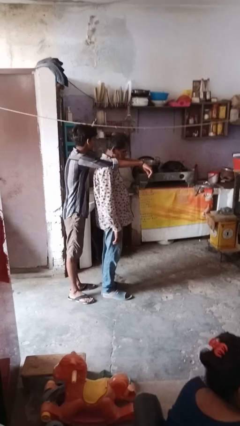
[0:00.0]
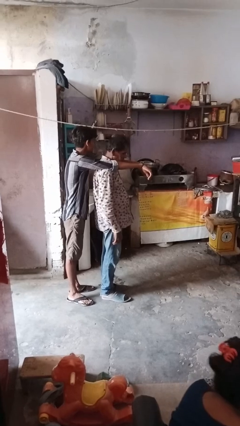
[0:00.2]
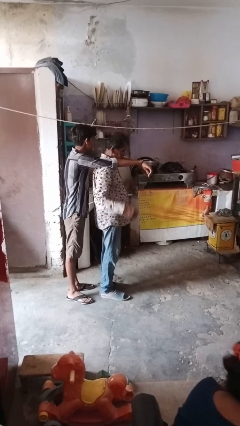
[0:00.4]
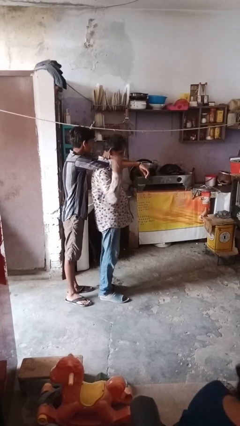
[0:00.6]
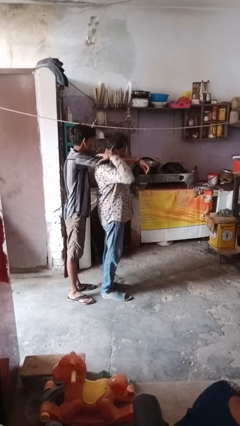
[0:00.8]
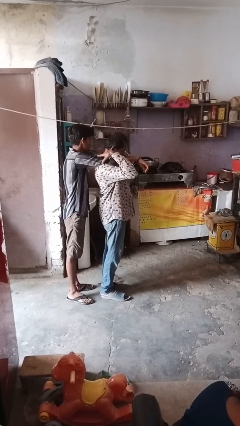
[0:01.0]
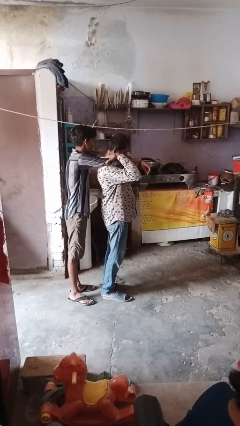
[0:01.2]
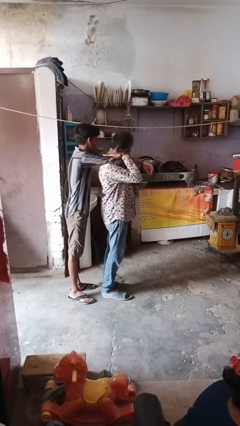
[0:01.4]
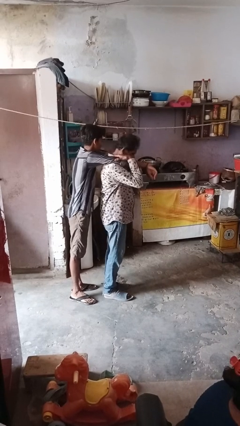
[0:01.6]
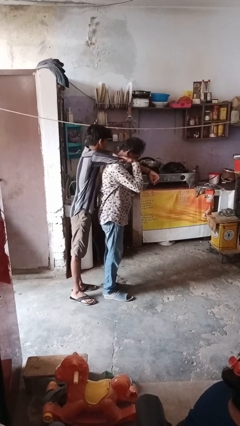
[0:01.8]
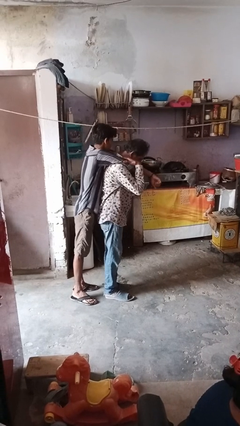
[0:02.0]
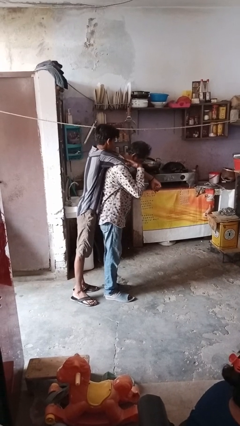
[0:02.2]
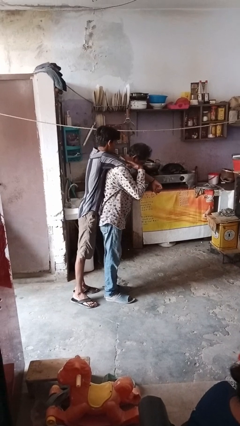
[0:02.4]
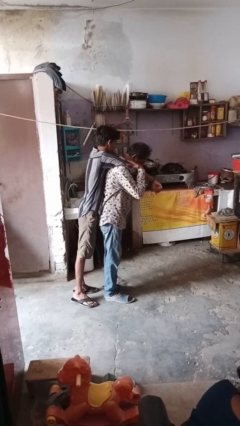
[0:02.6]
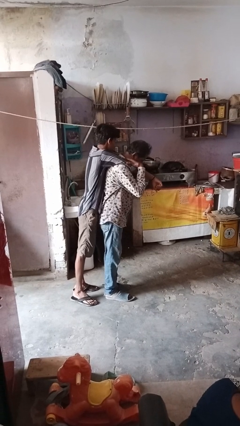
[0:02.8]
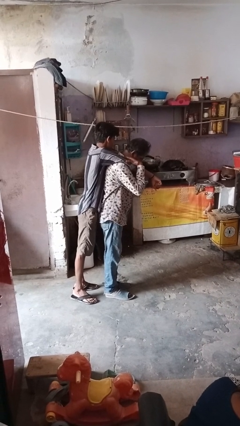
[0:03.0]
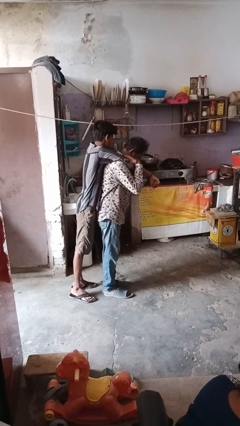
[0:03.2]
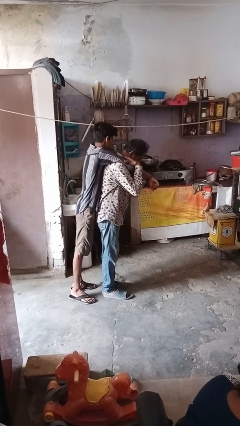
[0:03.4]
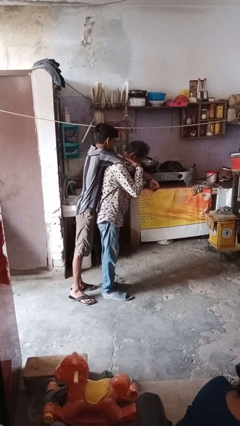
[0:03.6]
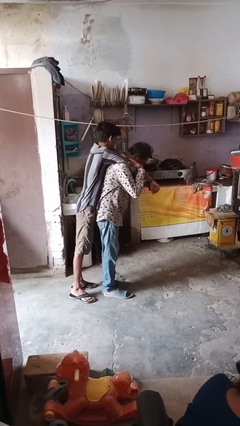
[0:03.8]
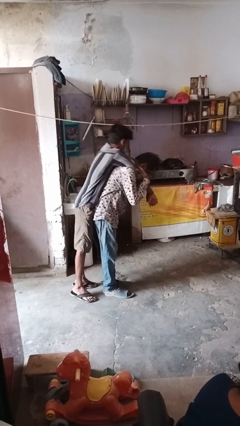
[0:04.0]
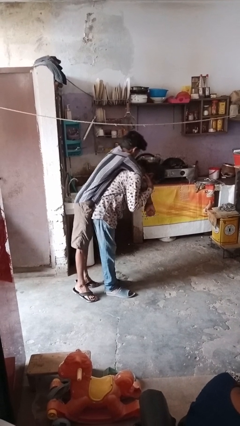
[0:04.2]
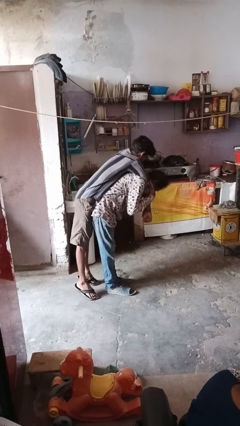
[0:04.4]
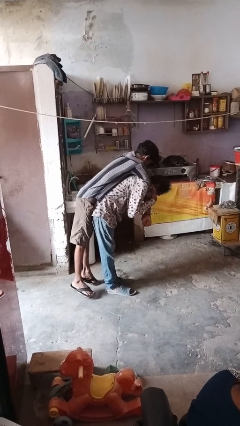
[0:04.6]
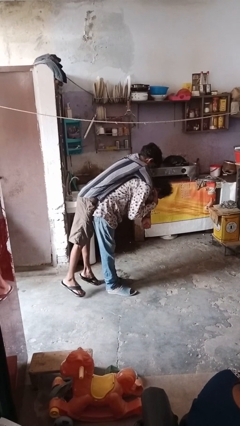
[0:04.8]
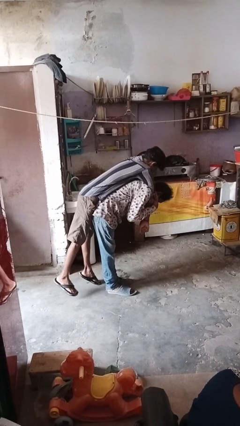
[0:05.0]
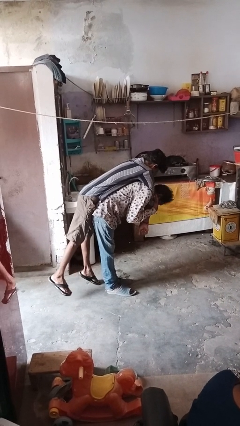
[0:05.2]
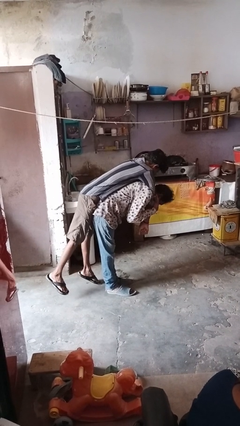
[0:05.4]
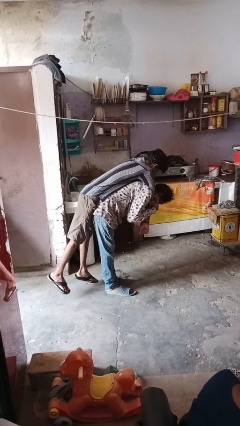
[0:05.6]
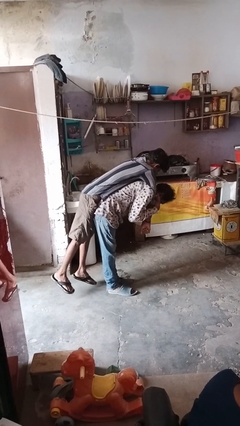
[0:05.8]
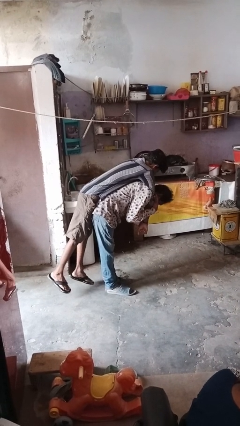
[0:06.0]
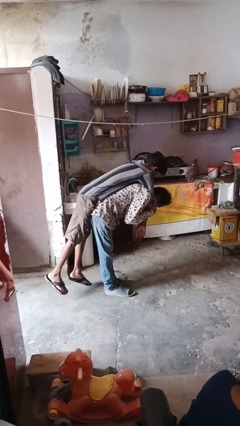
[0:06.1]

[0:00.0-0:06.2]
person carries person over shoulder

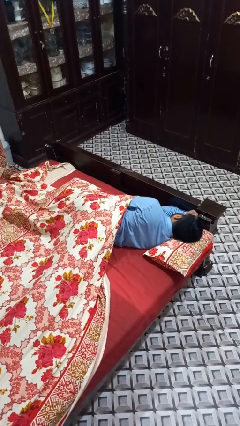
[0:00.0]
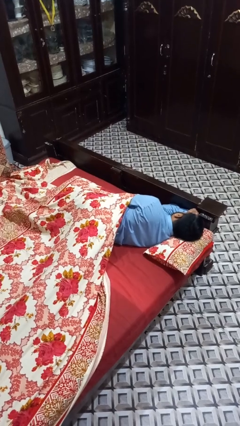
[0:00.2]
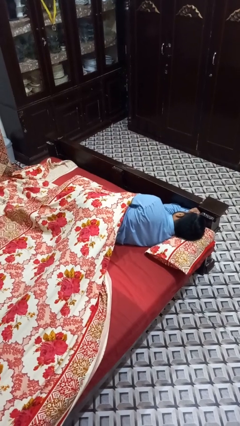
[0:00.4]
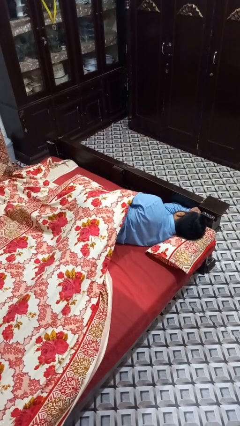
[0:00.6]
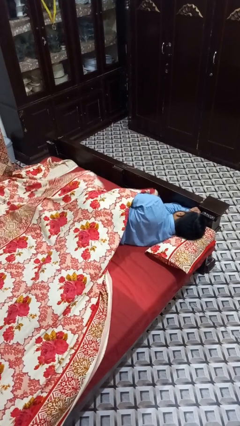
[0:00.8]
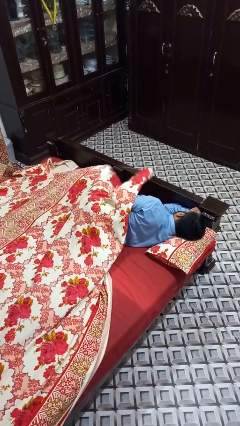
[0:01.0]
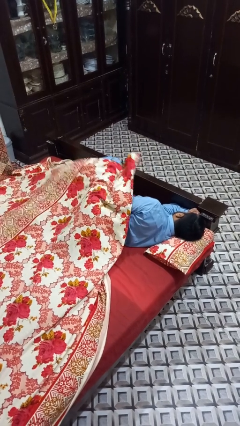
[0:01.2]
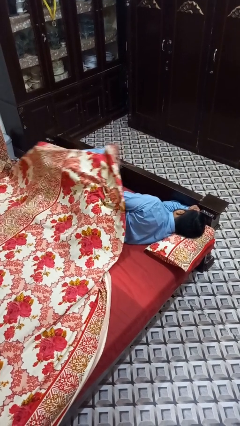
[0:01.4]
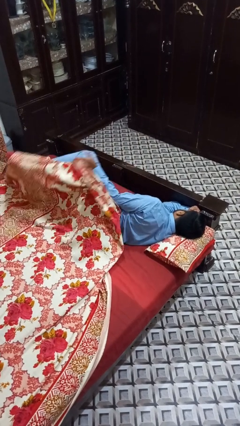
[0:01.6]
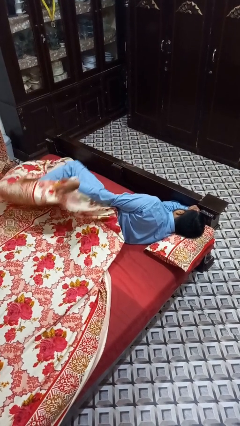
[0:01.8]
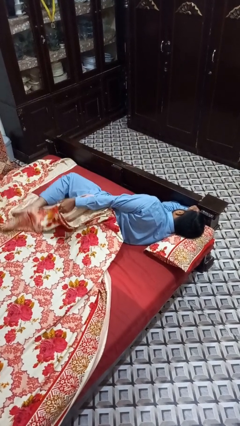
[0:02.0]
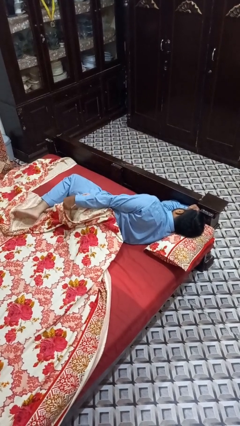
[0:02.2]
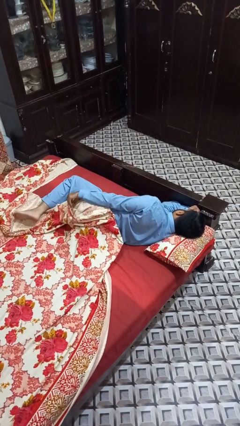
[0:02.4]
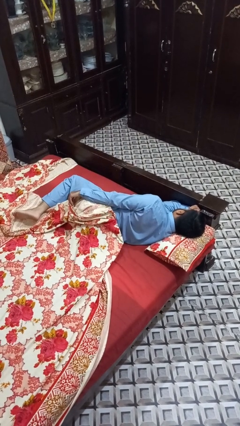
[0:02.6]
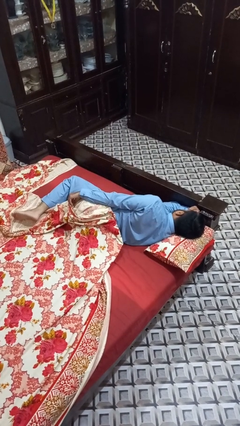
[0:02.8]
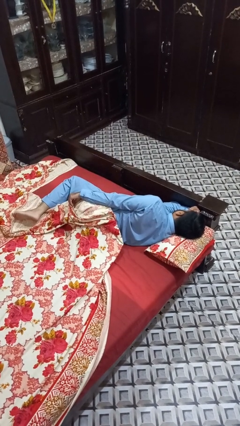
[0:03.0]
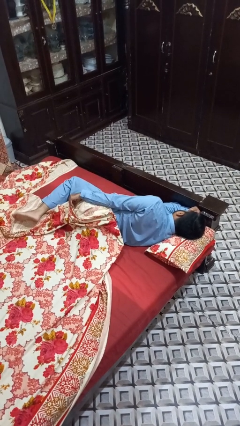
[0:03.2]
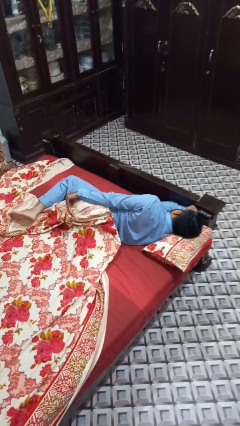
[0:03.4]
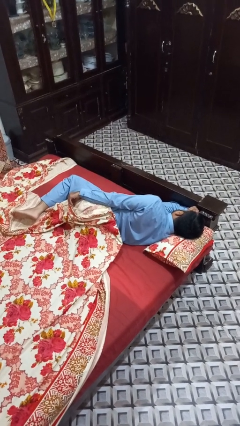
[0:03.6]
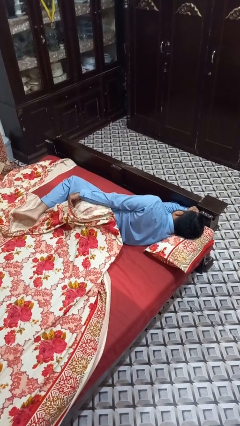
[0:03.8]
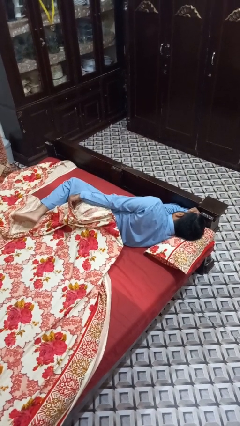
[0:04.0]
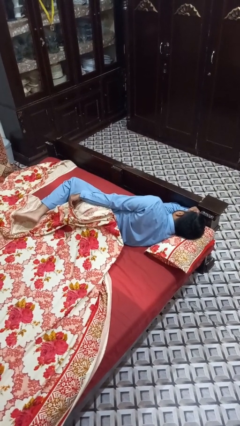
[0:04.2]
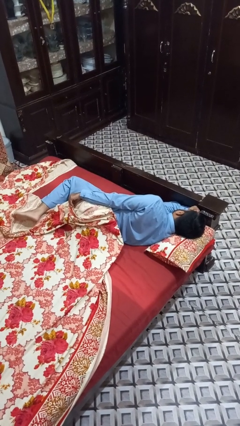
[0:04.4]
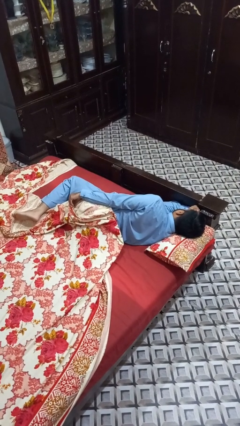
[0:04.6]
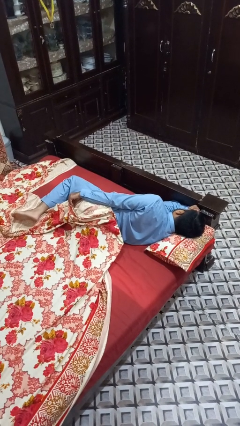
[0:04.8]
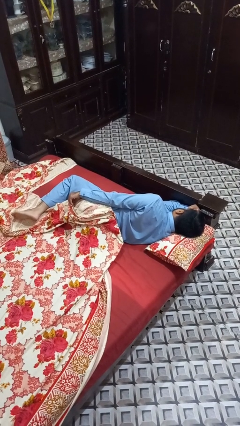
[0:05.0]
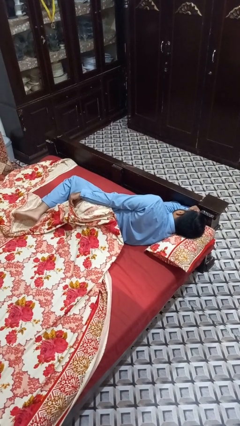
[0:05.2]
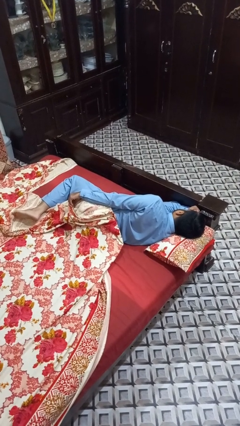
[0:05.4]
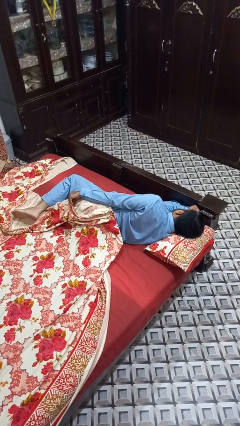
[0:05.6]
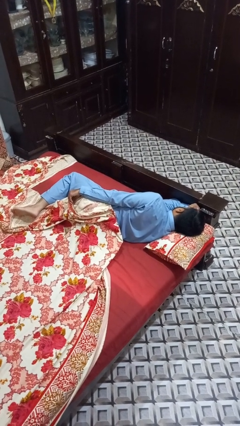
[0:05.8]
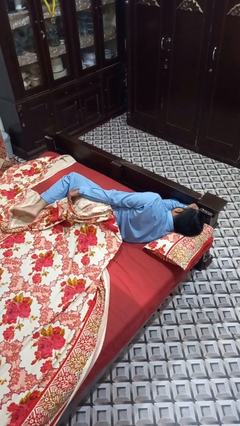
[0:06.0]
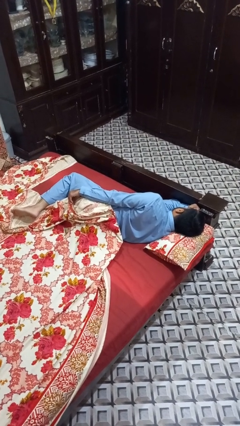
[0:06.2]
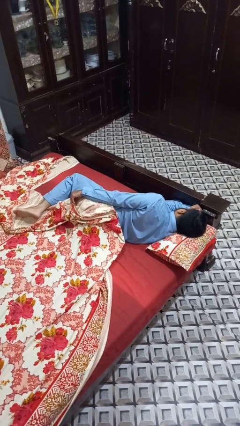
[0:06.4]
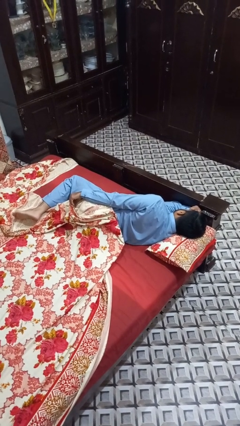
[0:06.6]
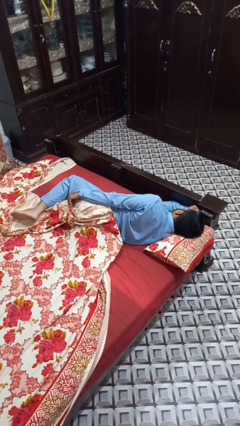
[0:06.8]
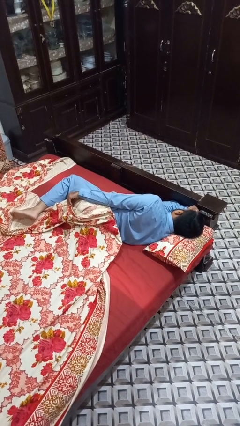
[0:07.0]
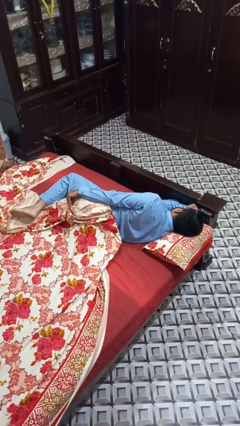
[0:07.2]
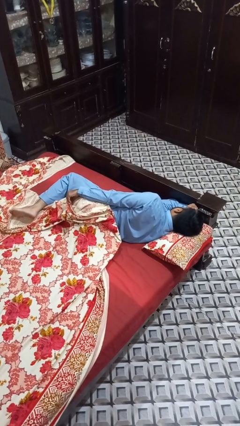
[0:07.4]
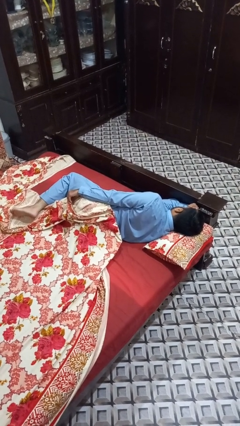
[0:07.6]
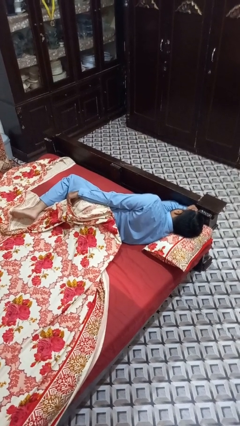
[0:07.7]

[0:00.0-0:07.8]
person uncovers with bedsheets

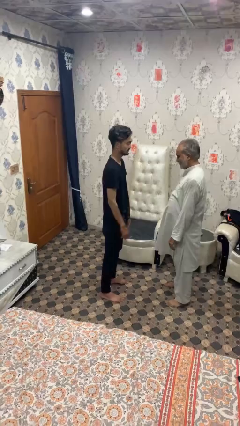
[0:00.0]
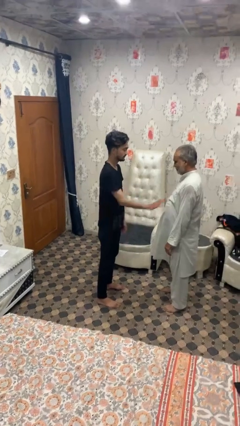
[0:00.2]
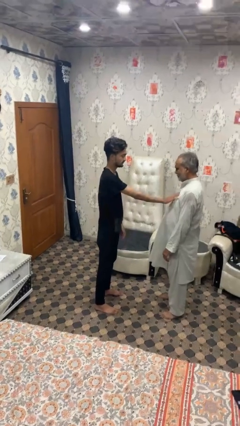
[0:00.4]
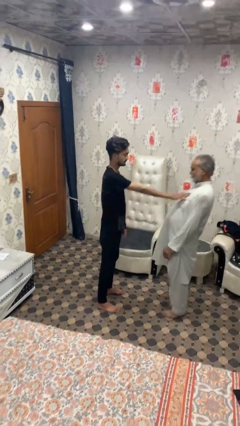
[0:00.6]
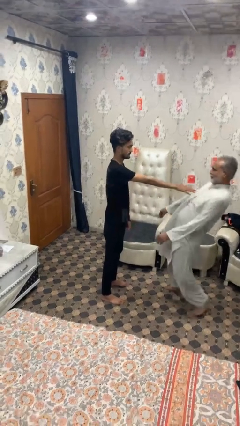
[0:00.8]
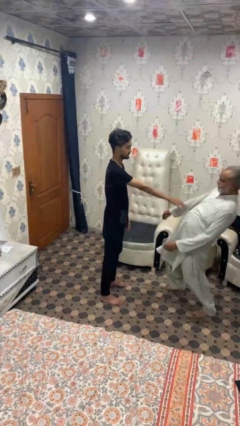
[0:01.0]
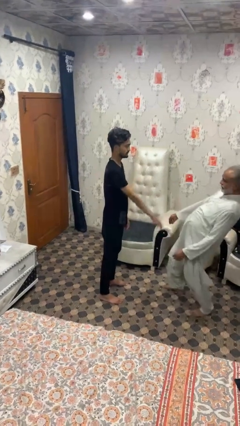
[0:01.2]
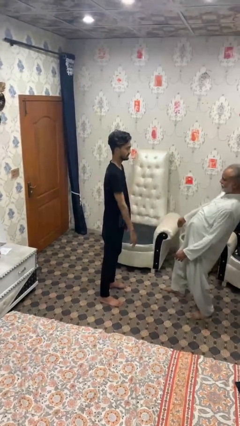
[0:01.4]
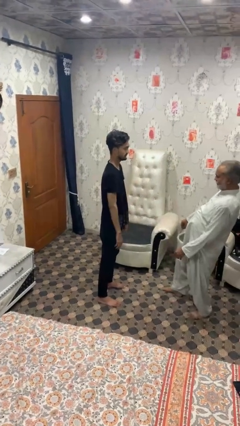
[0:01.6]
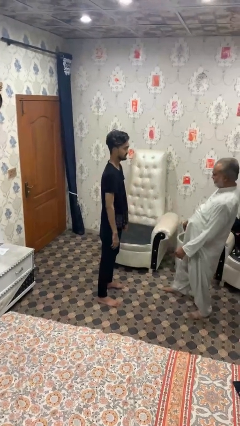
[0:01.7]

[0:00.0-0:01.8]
person shoves person

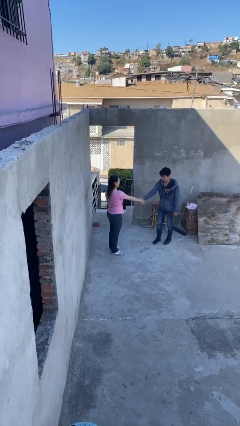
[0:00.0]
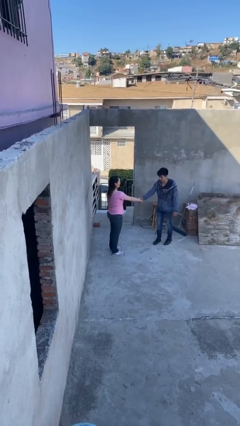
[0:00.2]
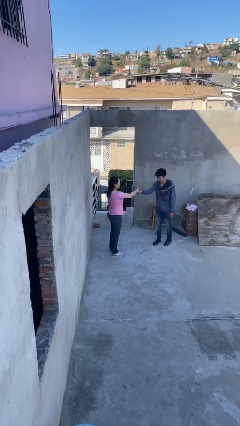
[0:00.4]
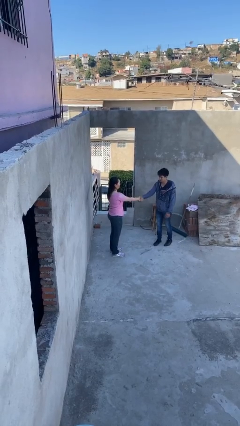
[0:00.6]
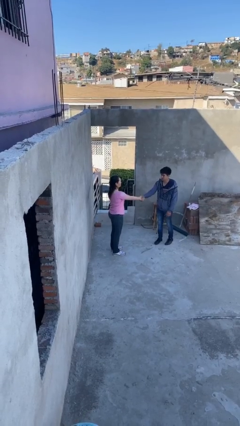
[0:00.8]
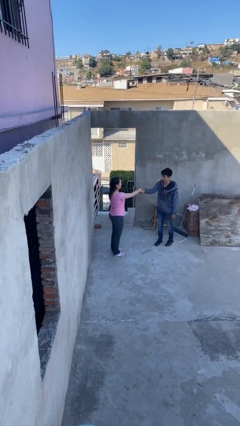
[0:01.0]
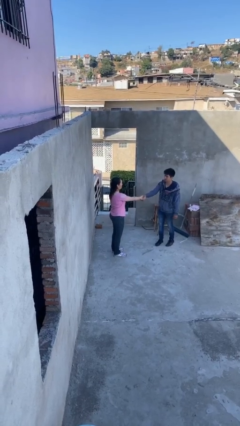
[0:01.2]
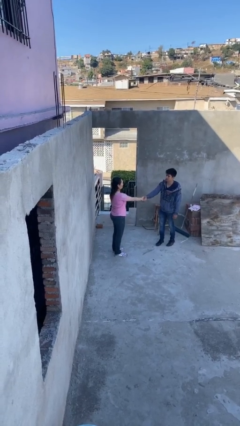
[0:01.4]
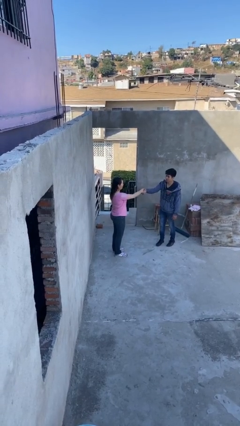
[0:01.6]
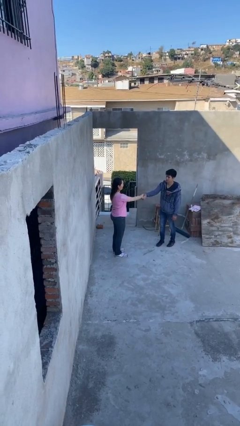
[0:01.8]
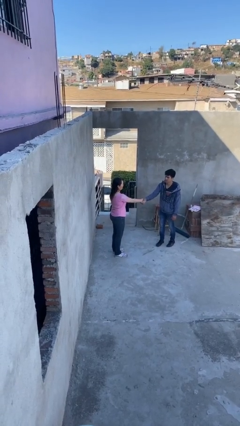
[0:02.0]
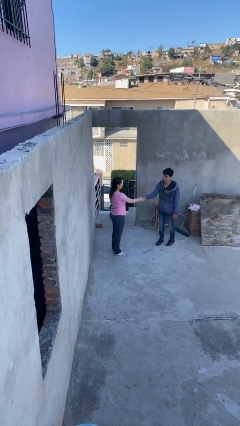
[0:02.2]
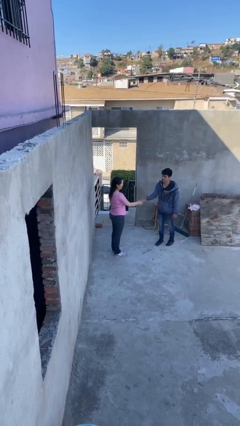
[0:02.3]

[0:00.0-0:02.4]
person shakes hand
